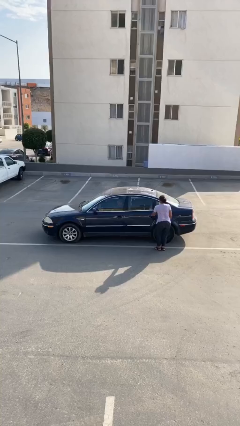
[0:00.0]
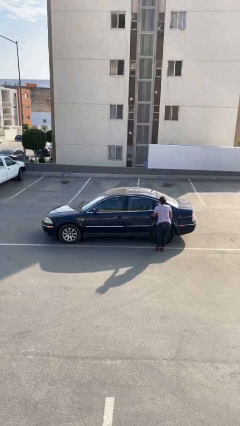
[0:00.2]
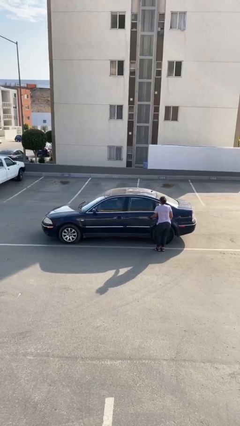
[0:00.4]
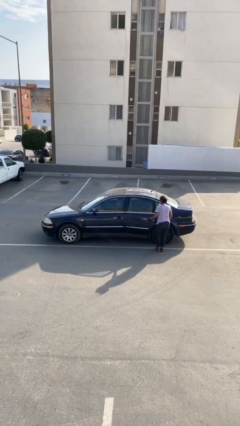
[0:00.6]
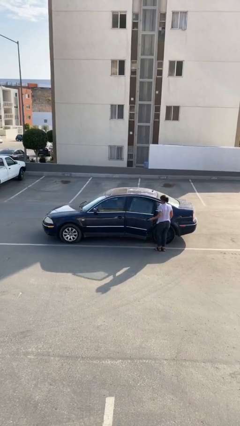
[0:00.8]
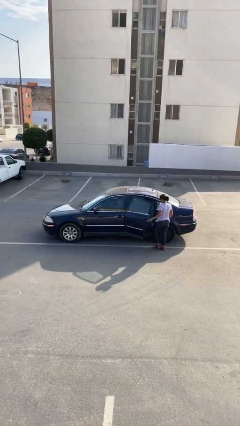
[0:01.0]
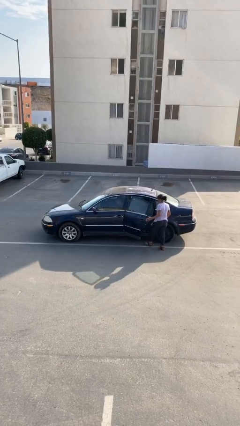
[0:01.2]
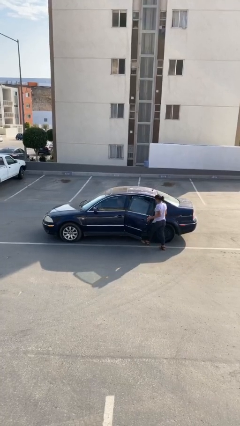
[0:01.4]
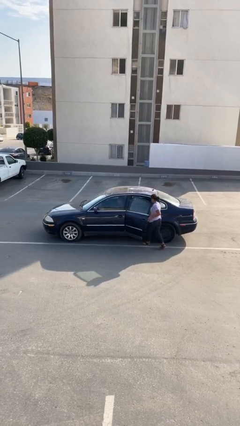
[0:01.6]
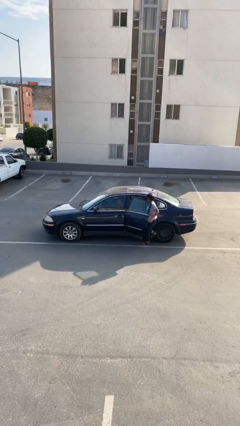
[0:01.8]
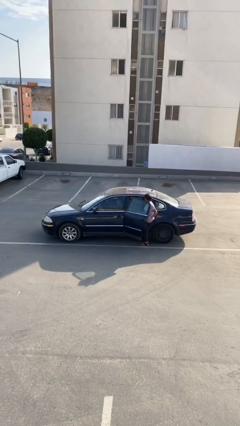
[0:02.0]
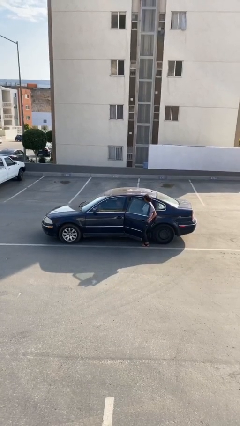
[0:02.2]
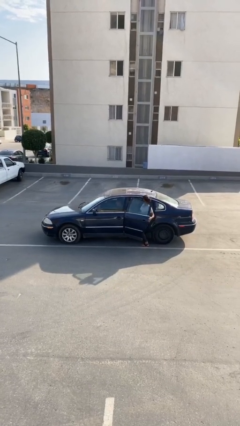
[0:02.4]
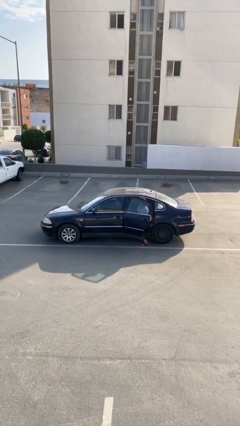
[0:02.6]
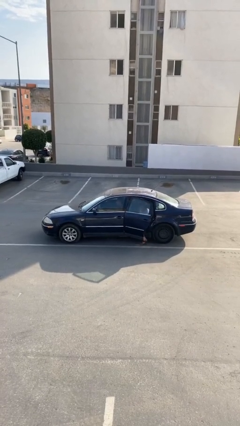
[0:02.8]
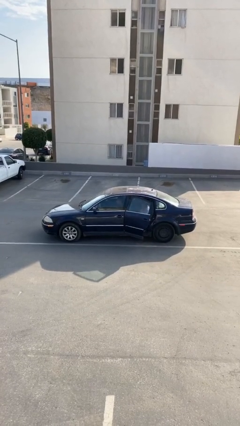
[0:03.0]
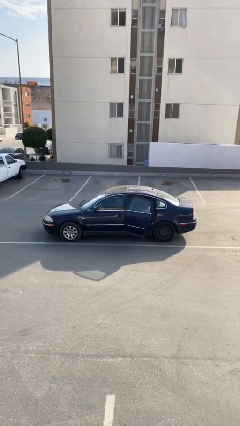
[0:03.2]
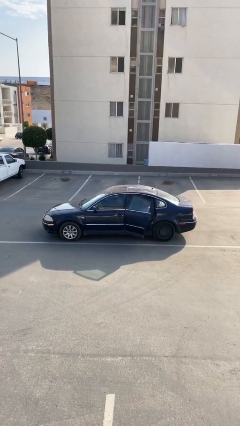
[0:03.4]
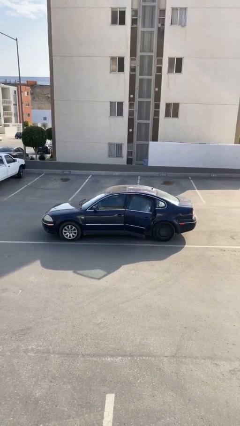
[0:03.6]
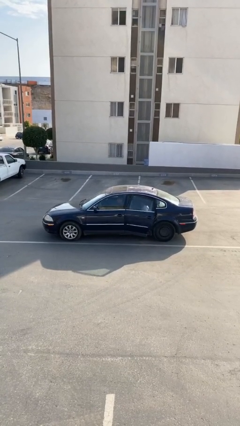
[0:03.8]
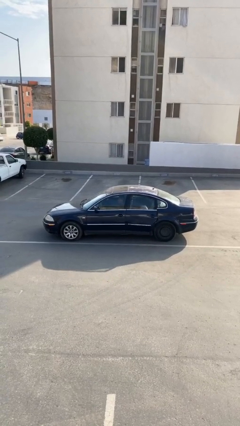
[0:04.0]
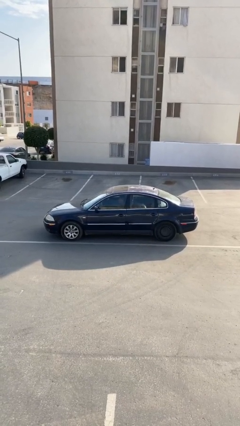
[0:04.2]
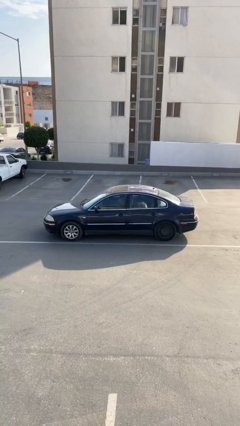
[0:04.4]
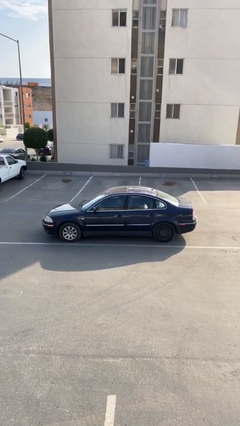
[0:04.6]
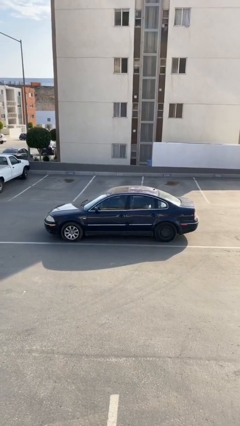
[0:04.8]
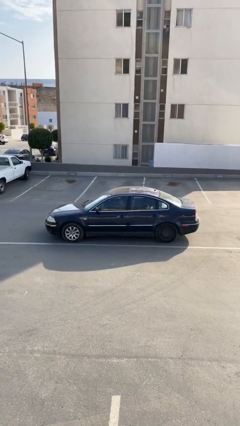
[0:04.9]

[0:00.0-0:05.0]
car picks up person

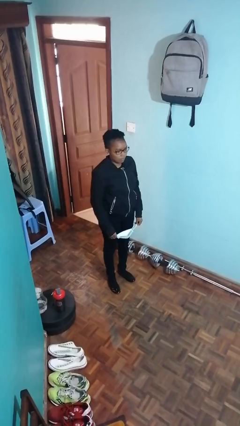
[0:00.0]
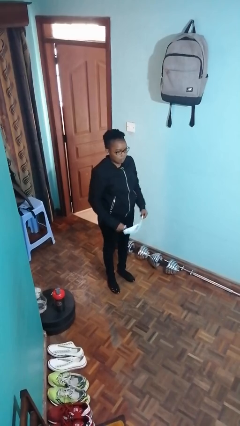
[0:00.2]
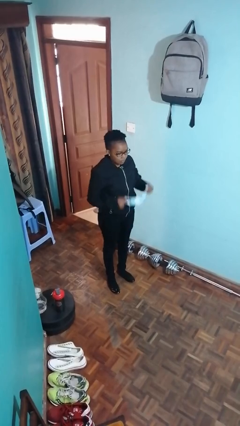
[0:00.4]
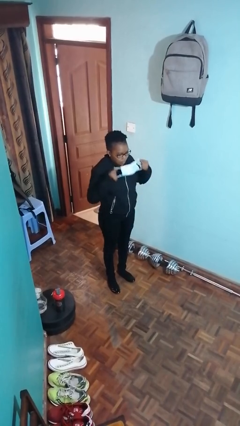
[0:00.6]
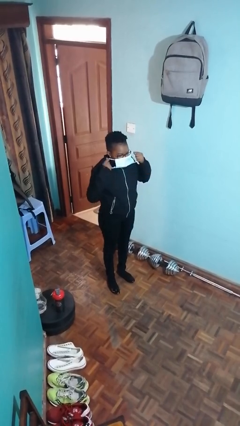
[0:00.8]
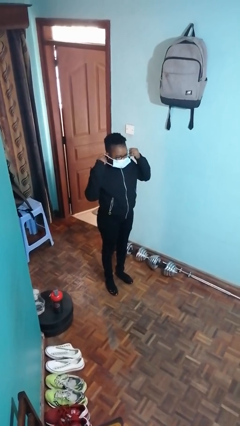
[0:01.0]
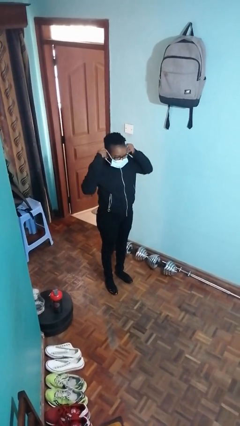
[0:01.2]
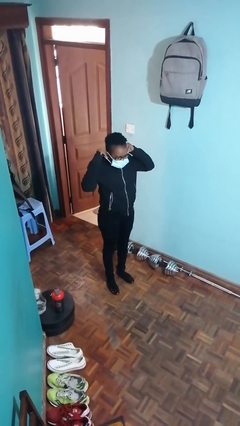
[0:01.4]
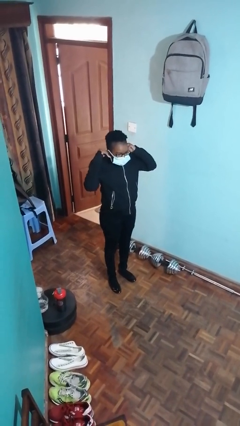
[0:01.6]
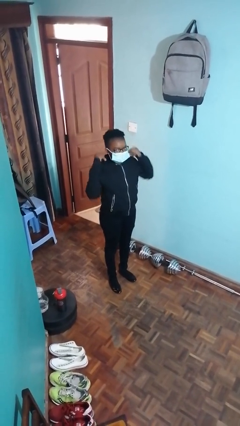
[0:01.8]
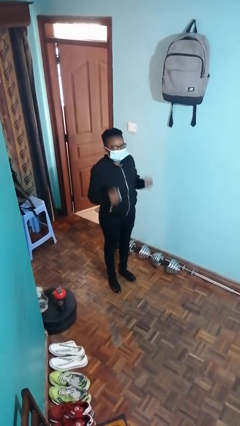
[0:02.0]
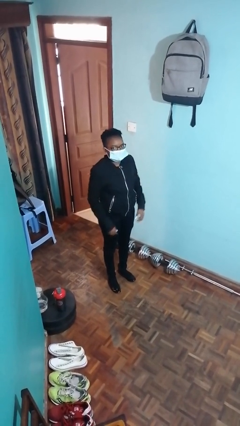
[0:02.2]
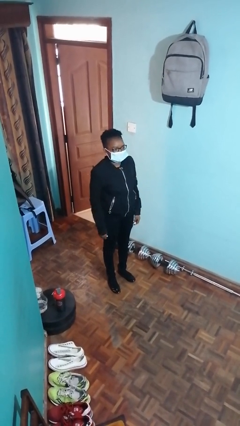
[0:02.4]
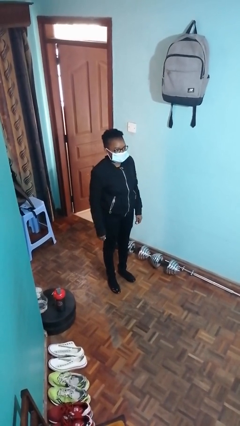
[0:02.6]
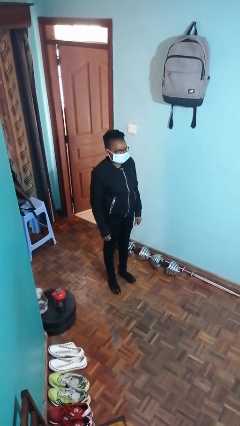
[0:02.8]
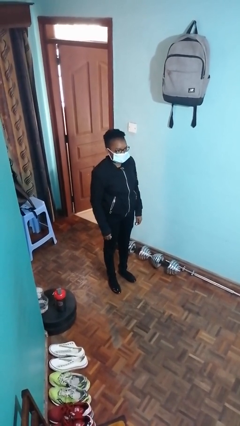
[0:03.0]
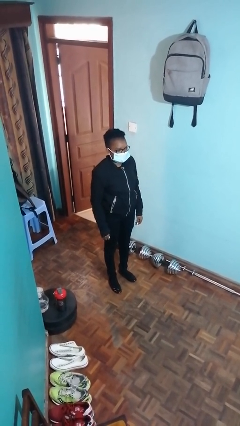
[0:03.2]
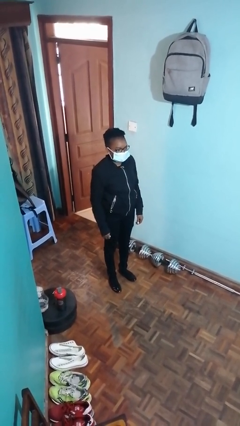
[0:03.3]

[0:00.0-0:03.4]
person puts on facemask

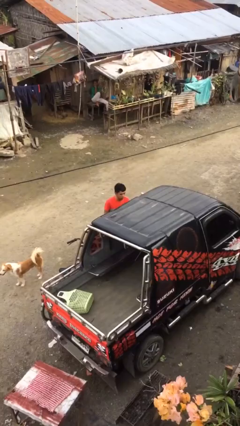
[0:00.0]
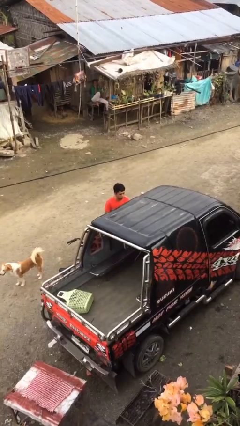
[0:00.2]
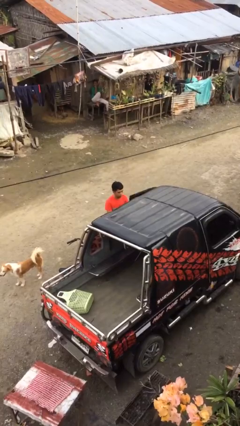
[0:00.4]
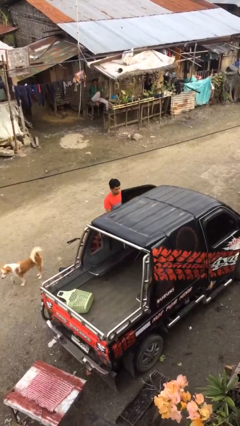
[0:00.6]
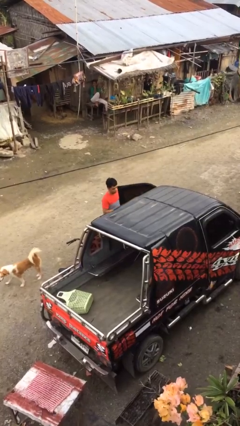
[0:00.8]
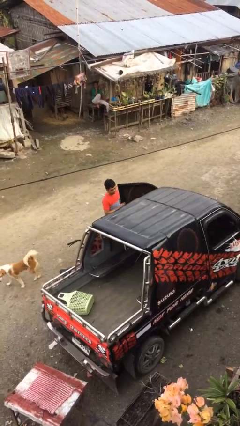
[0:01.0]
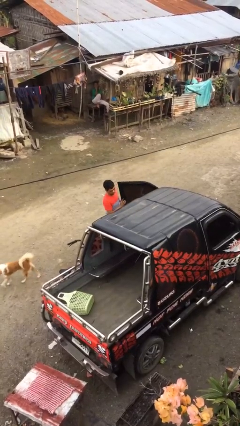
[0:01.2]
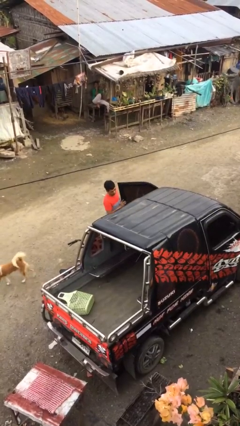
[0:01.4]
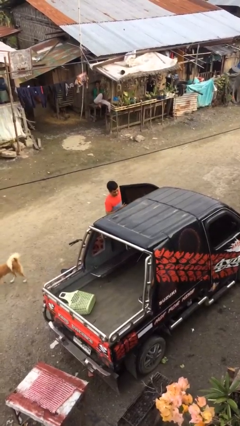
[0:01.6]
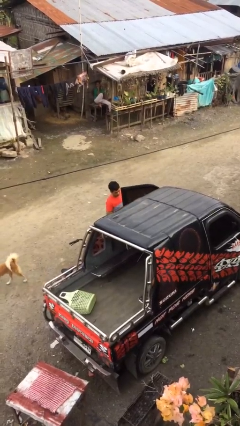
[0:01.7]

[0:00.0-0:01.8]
person opens car door

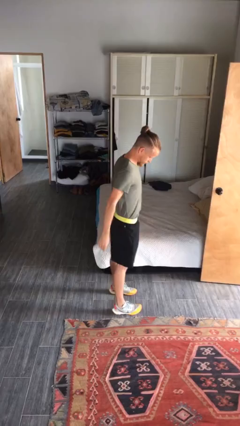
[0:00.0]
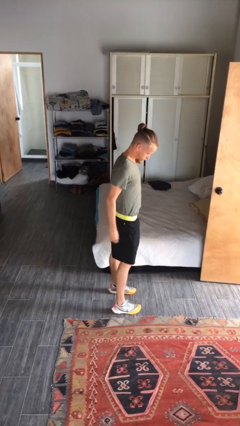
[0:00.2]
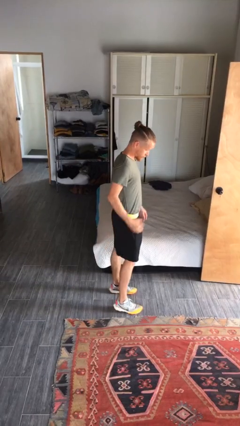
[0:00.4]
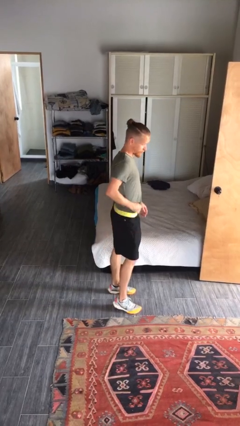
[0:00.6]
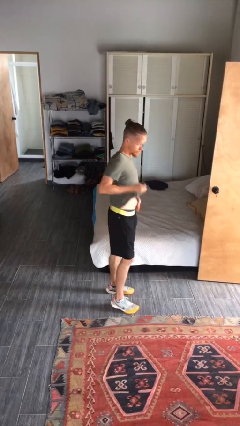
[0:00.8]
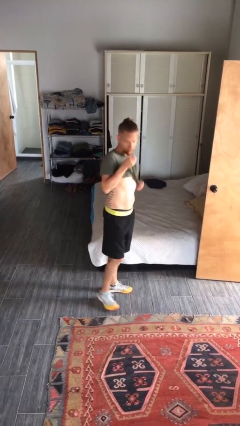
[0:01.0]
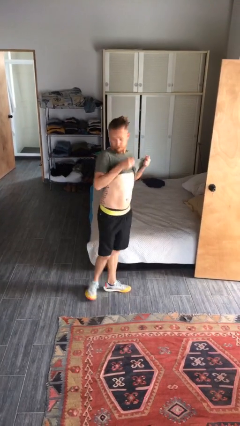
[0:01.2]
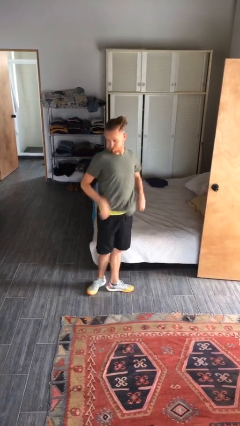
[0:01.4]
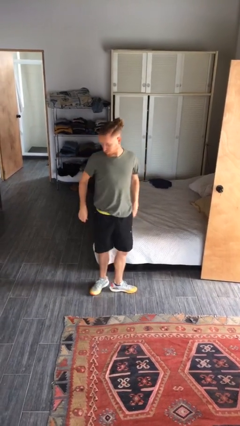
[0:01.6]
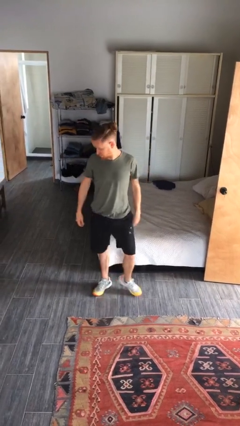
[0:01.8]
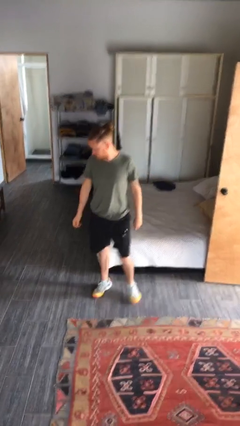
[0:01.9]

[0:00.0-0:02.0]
person untucks shirt

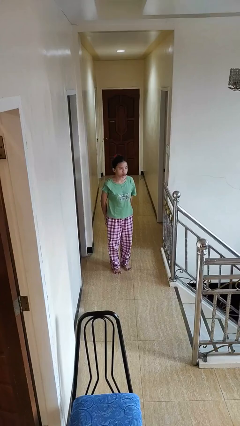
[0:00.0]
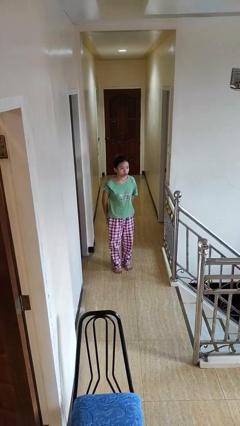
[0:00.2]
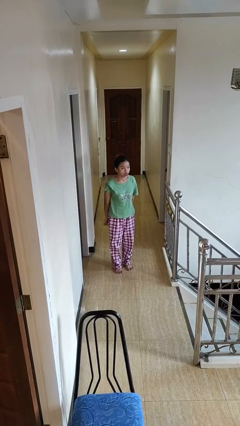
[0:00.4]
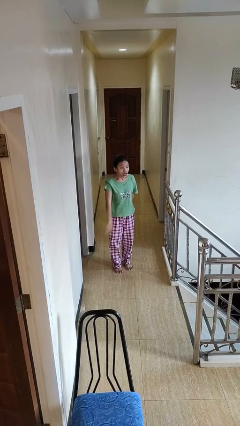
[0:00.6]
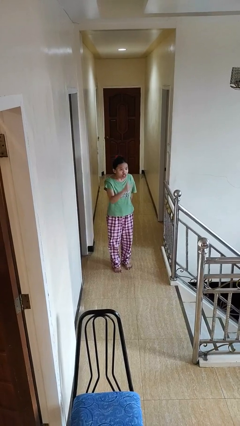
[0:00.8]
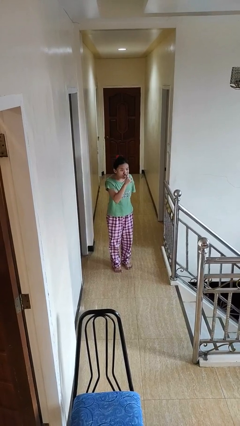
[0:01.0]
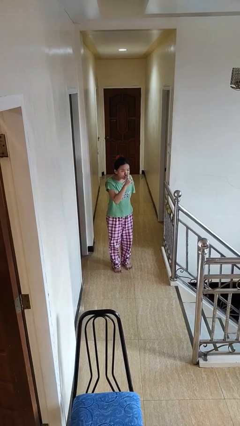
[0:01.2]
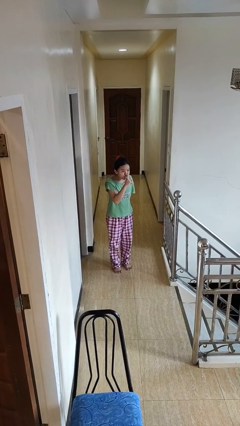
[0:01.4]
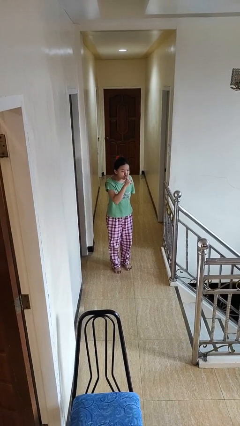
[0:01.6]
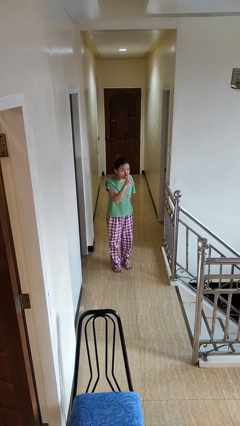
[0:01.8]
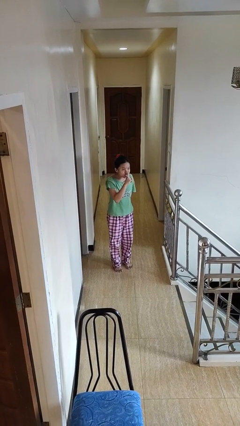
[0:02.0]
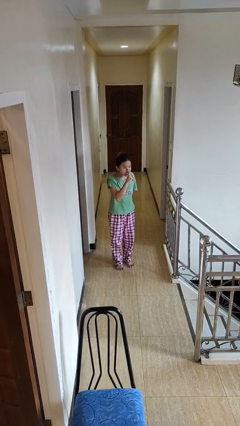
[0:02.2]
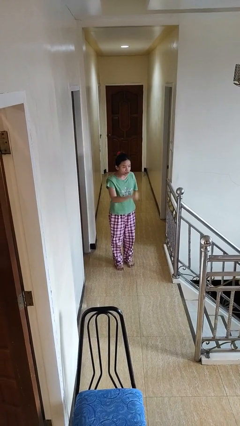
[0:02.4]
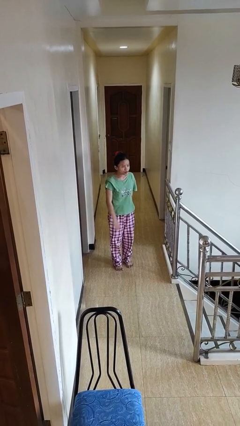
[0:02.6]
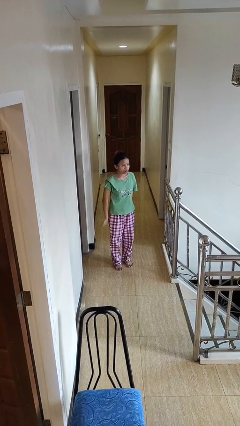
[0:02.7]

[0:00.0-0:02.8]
person gestures be quiet

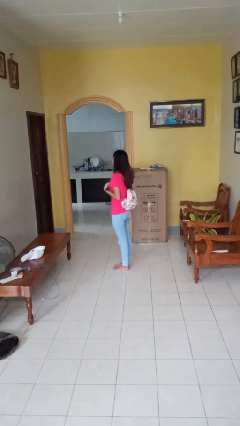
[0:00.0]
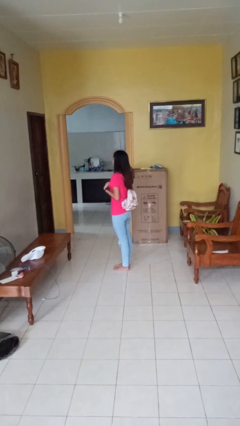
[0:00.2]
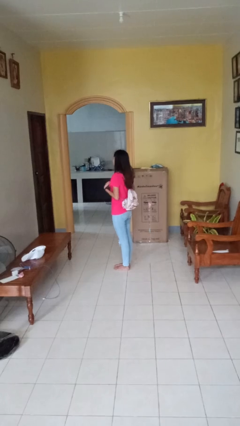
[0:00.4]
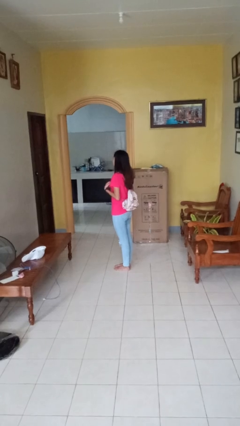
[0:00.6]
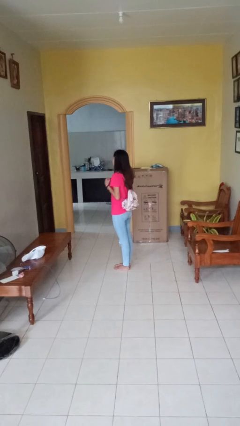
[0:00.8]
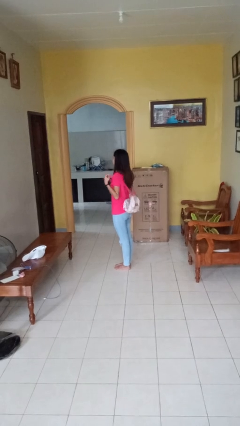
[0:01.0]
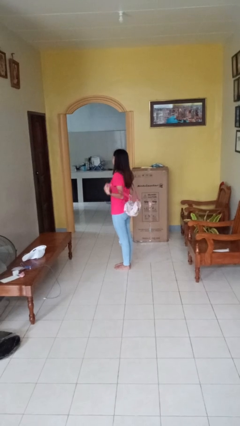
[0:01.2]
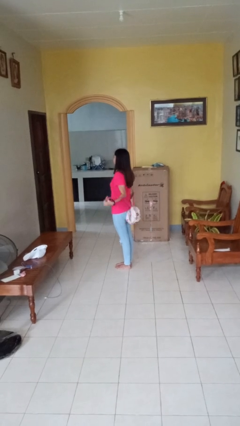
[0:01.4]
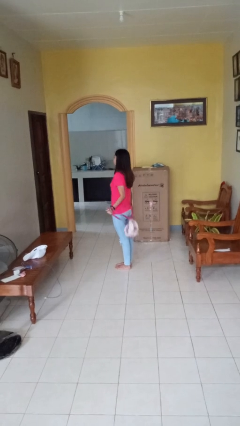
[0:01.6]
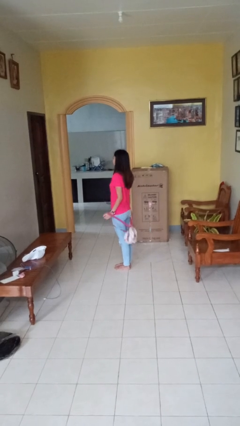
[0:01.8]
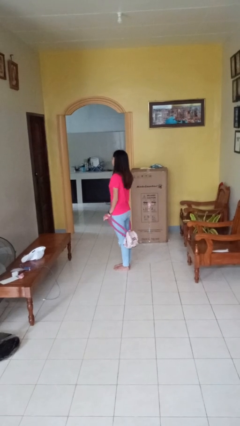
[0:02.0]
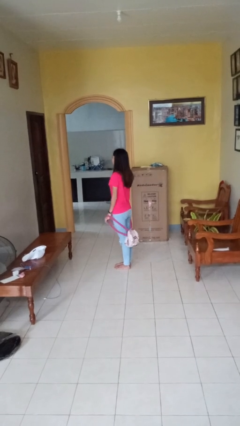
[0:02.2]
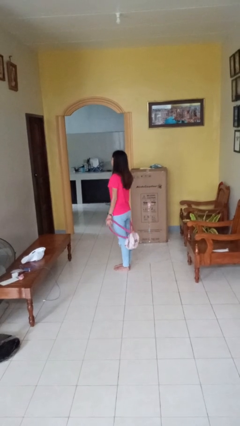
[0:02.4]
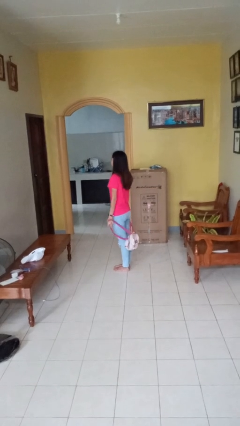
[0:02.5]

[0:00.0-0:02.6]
person takes off backpack
